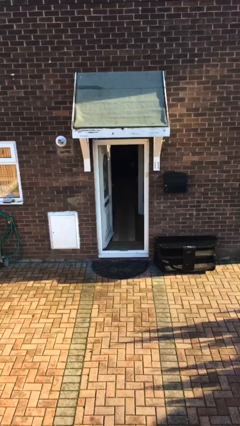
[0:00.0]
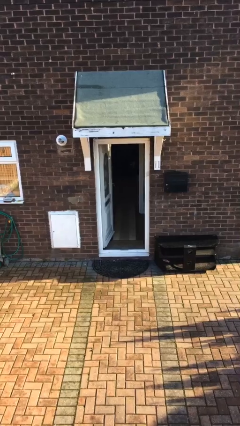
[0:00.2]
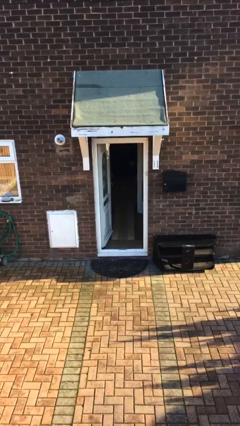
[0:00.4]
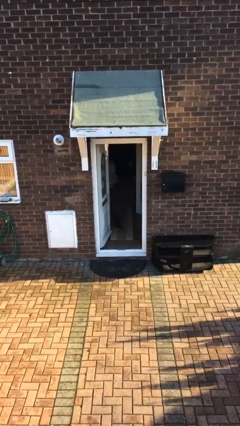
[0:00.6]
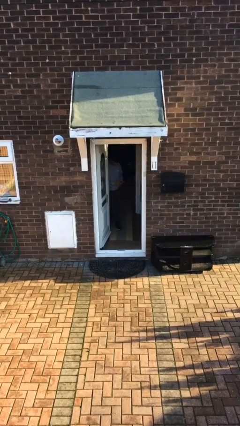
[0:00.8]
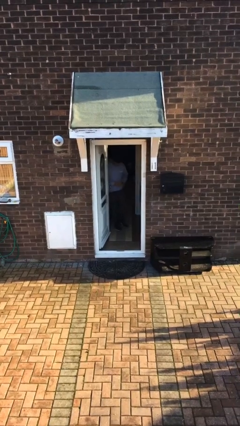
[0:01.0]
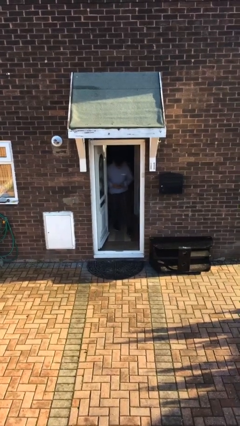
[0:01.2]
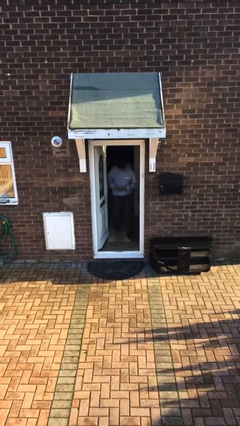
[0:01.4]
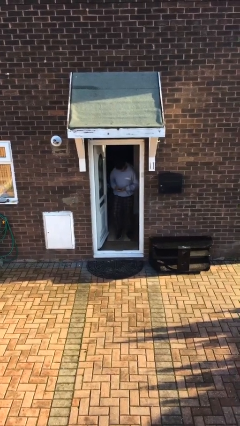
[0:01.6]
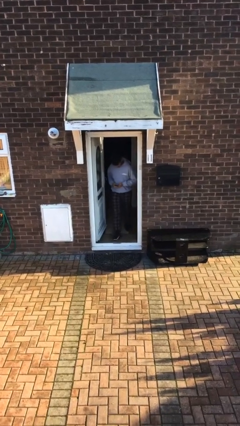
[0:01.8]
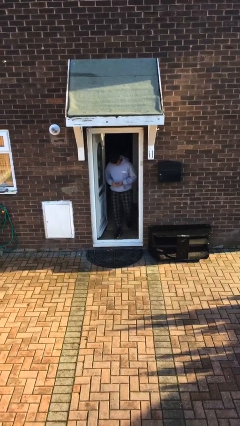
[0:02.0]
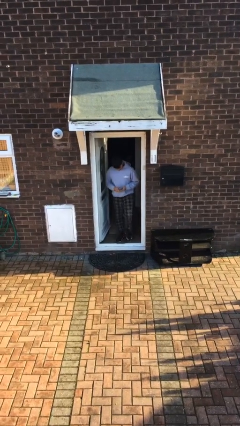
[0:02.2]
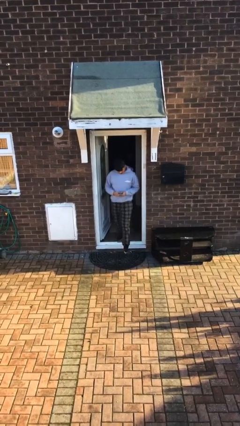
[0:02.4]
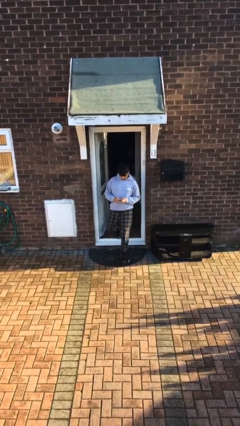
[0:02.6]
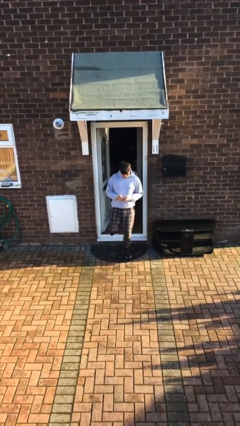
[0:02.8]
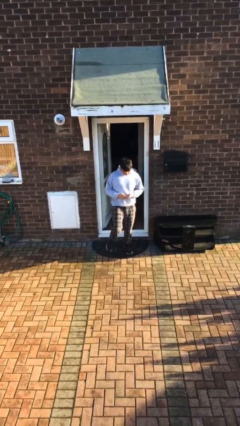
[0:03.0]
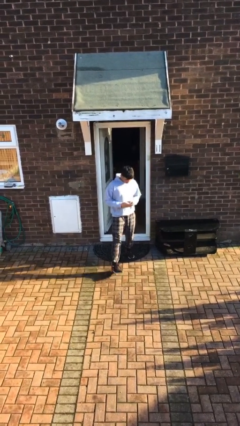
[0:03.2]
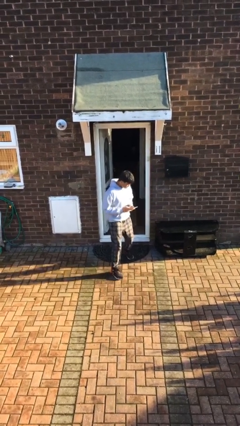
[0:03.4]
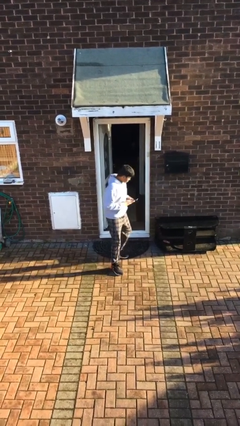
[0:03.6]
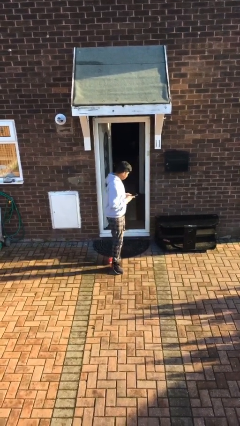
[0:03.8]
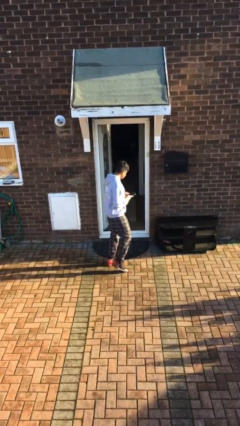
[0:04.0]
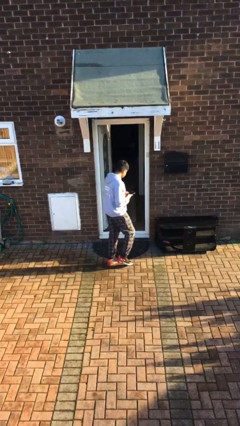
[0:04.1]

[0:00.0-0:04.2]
person enters scene through structure

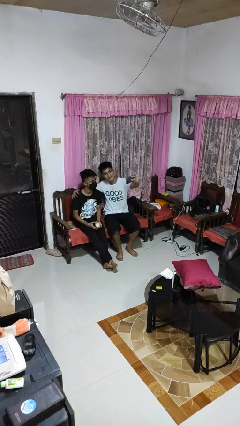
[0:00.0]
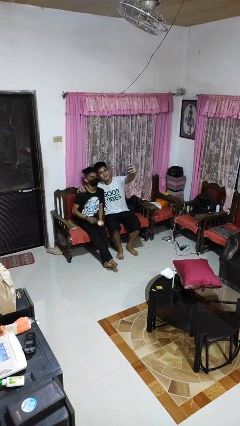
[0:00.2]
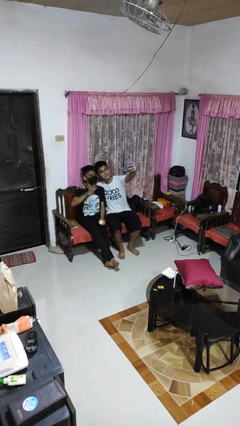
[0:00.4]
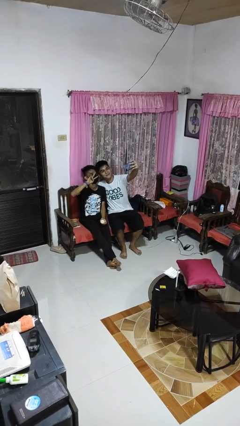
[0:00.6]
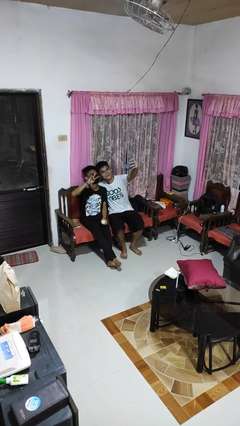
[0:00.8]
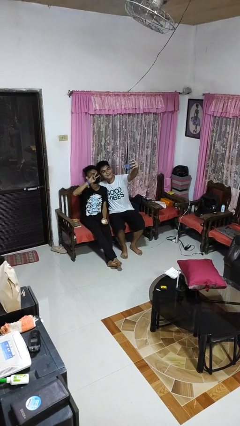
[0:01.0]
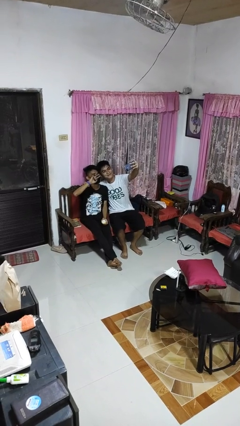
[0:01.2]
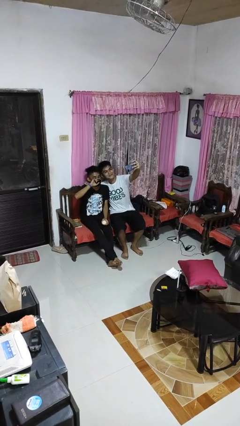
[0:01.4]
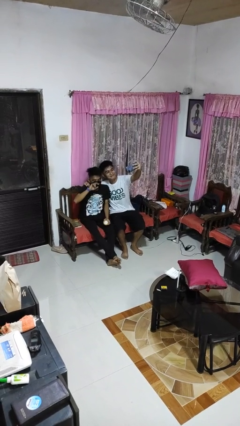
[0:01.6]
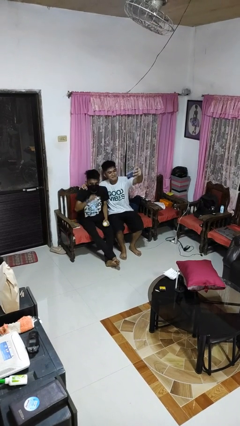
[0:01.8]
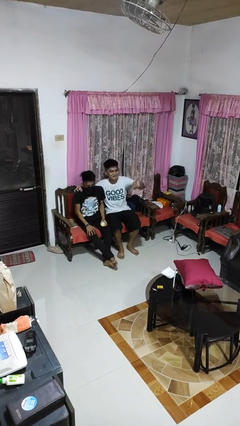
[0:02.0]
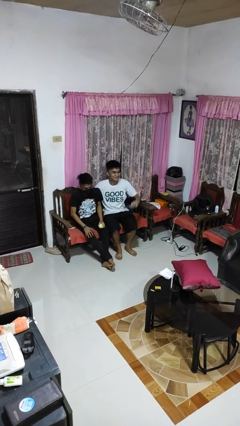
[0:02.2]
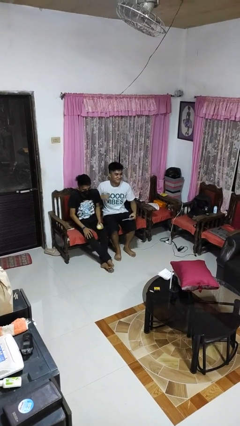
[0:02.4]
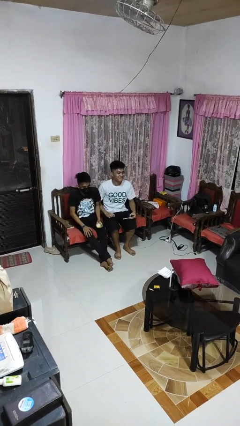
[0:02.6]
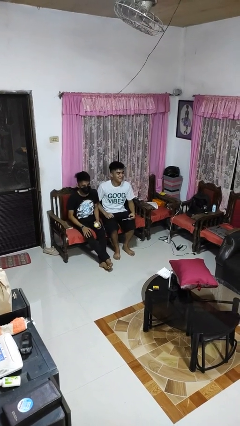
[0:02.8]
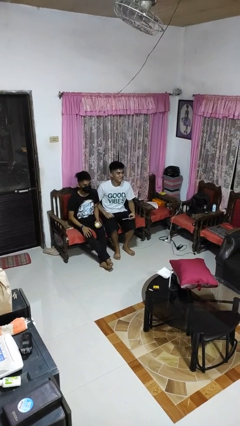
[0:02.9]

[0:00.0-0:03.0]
person takes selfie with person

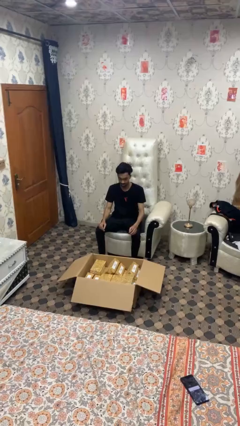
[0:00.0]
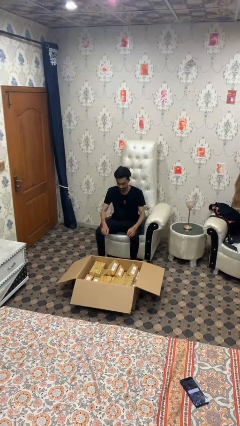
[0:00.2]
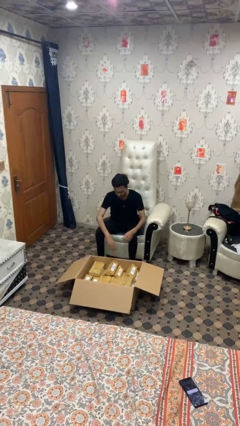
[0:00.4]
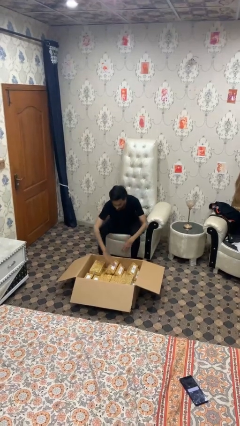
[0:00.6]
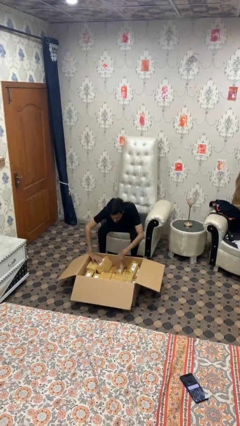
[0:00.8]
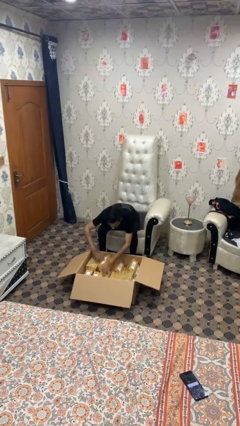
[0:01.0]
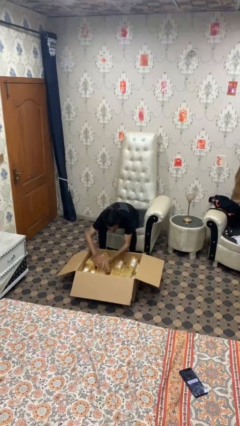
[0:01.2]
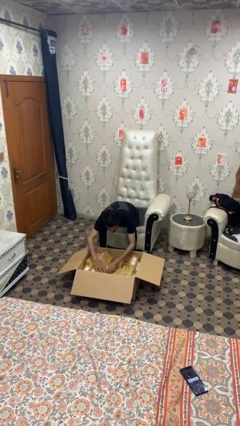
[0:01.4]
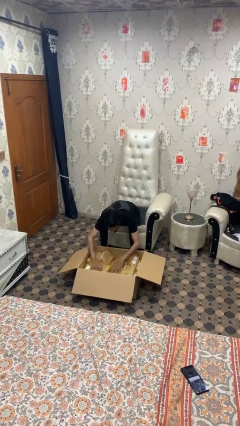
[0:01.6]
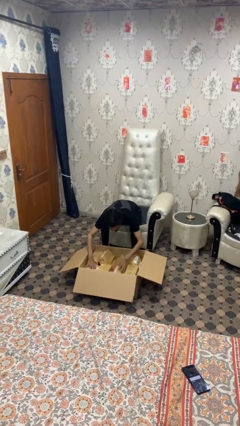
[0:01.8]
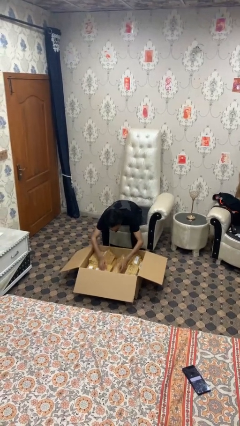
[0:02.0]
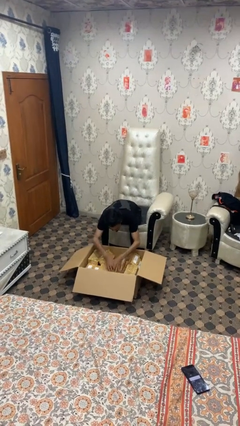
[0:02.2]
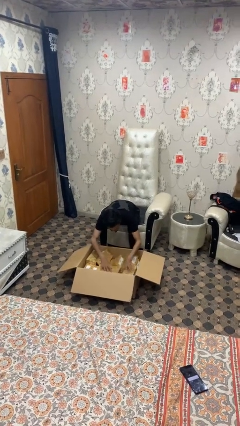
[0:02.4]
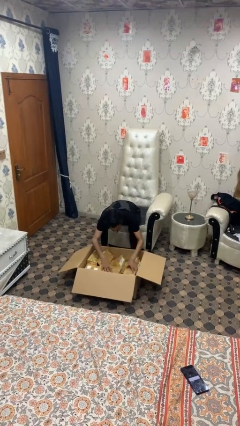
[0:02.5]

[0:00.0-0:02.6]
person searches in box

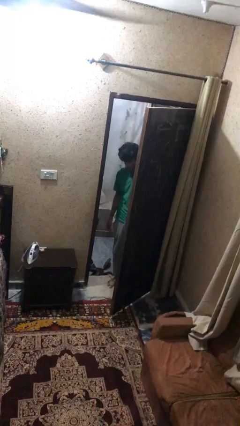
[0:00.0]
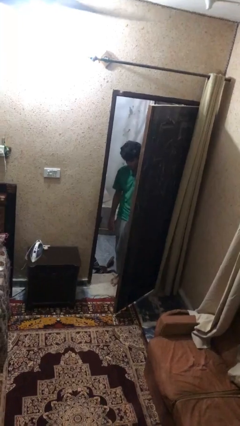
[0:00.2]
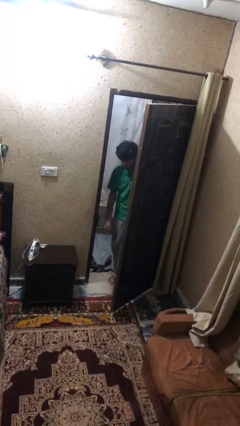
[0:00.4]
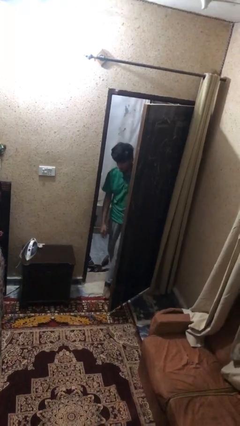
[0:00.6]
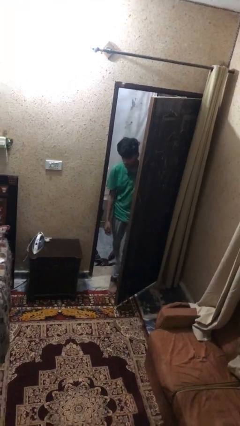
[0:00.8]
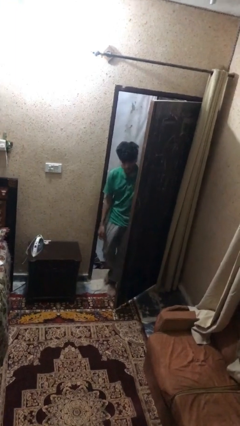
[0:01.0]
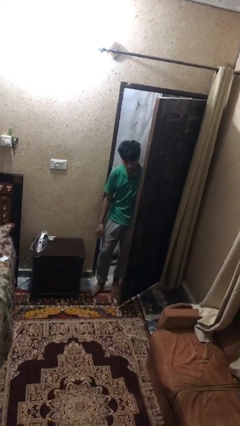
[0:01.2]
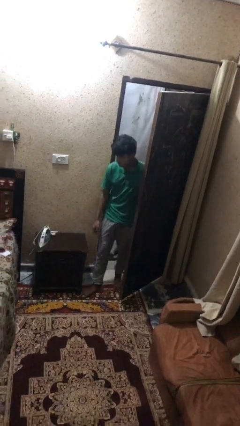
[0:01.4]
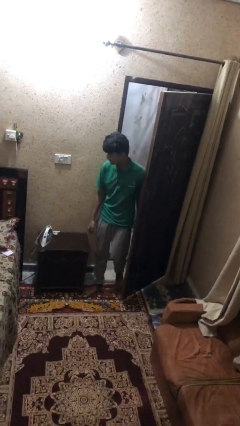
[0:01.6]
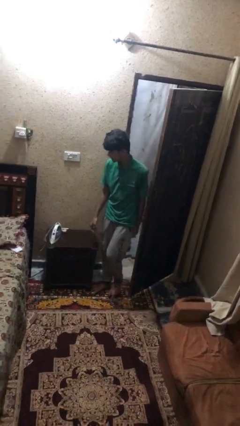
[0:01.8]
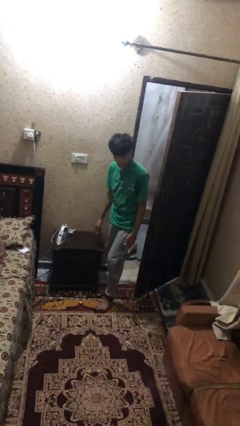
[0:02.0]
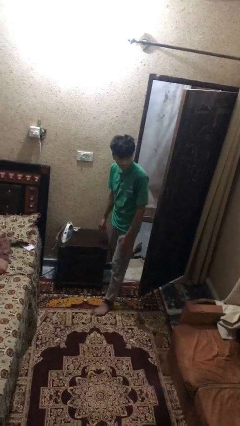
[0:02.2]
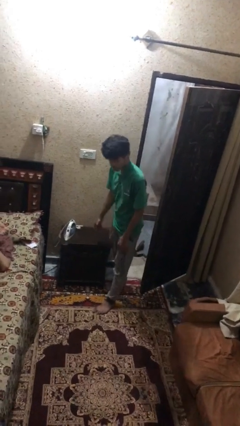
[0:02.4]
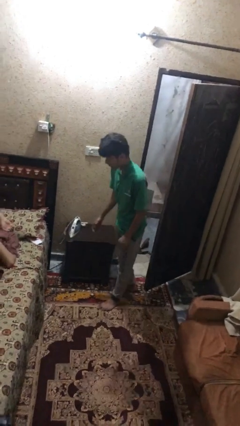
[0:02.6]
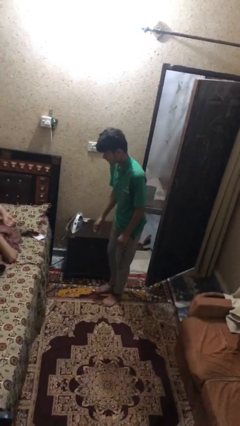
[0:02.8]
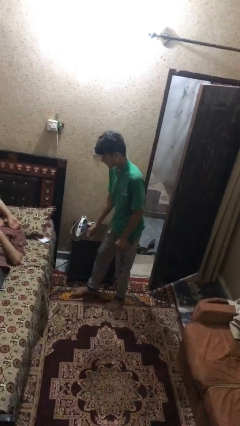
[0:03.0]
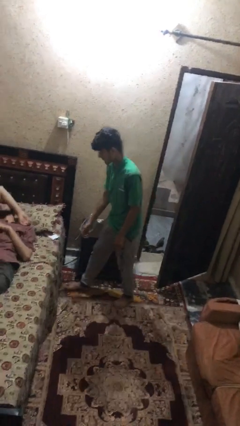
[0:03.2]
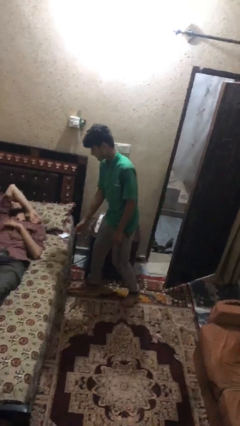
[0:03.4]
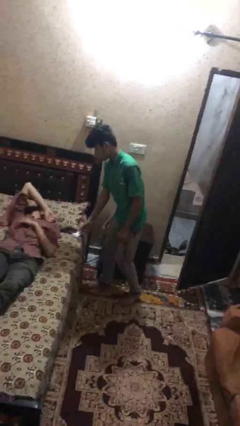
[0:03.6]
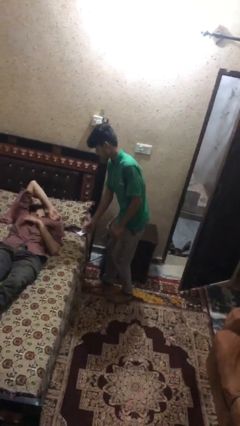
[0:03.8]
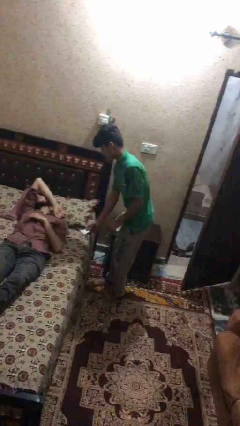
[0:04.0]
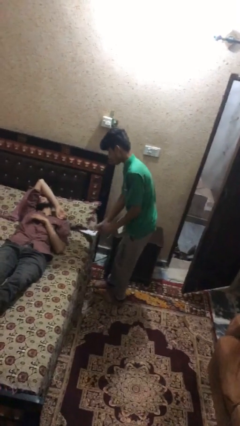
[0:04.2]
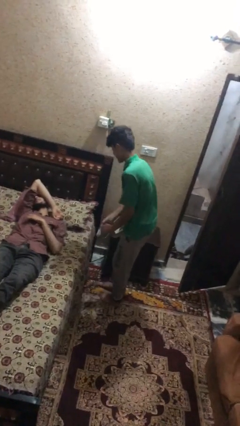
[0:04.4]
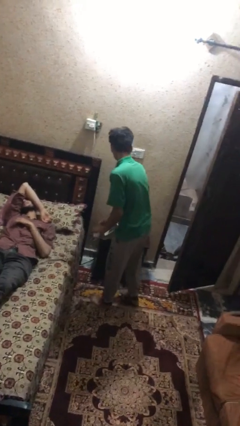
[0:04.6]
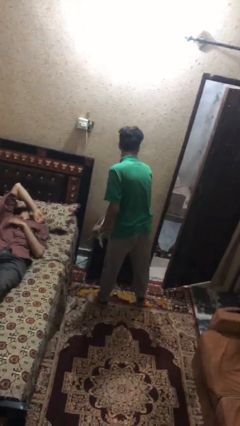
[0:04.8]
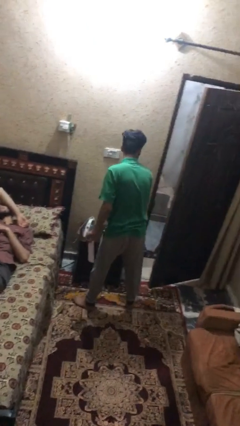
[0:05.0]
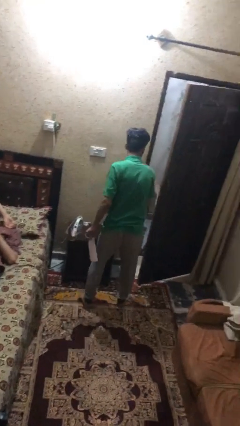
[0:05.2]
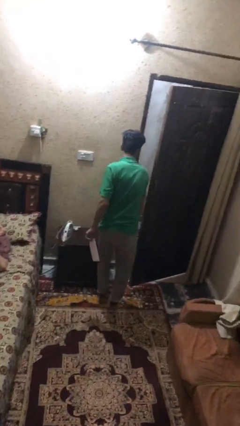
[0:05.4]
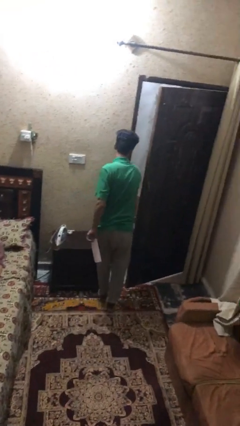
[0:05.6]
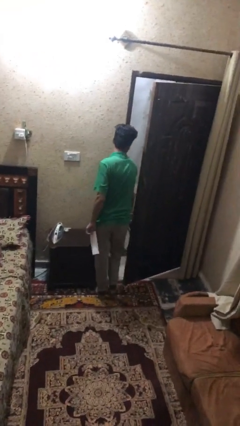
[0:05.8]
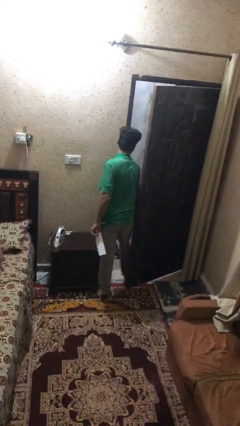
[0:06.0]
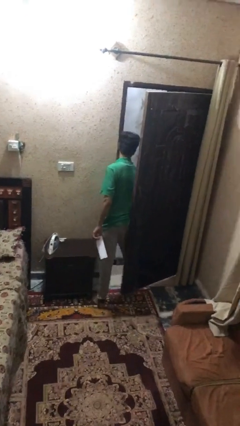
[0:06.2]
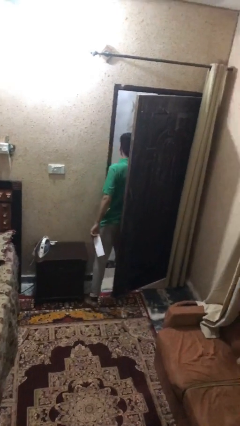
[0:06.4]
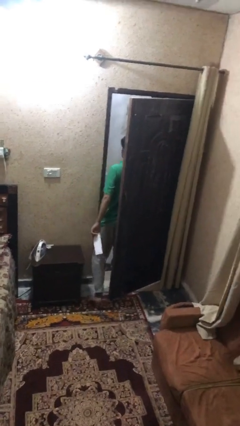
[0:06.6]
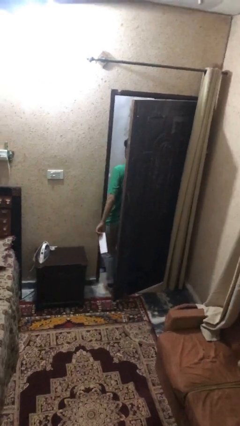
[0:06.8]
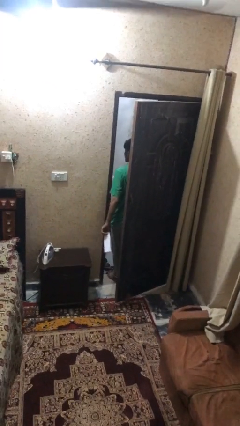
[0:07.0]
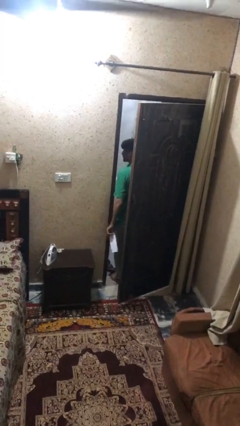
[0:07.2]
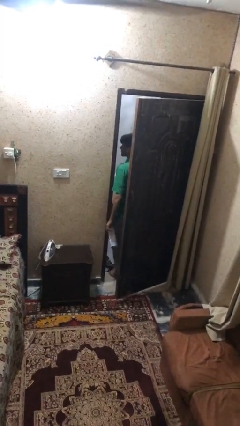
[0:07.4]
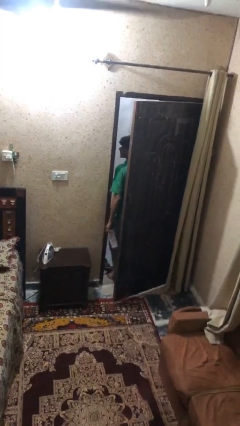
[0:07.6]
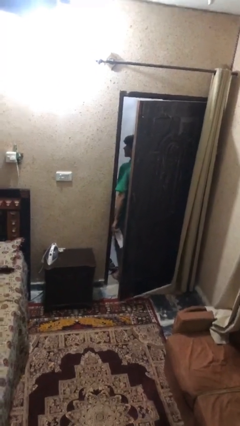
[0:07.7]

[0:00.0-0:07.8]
person steals object from person
